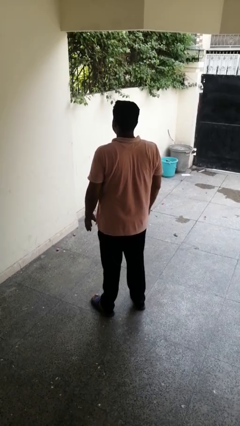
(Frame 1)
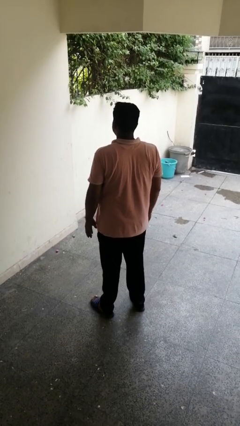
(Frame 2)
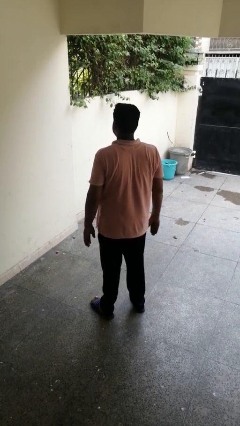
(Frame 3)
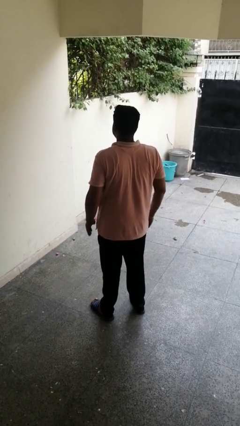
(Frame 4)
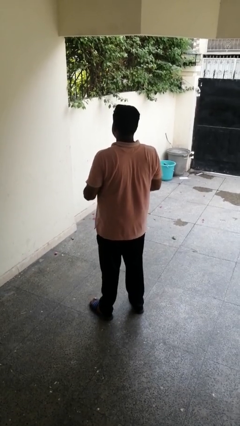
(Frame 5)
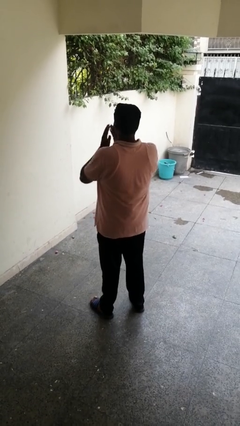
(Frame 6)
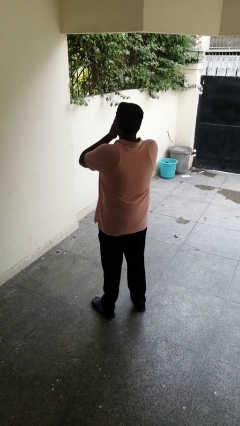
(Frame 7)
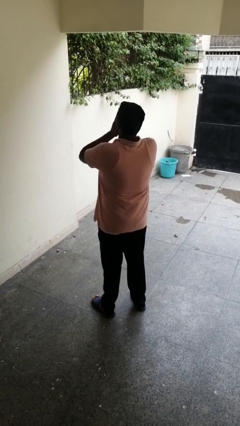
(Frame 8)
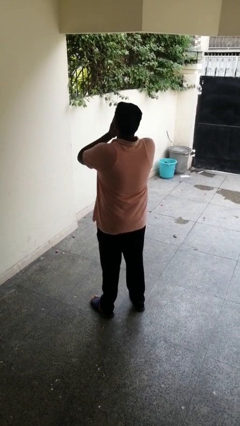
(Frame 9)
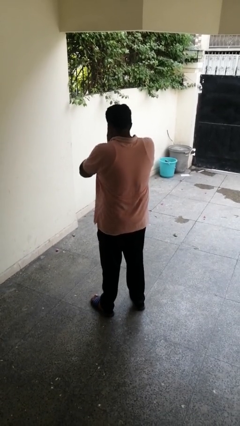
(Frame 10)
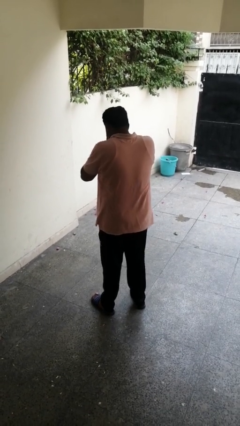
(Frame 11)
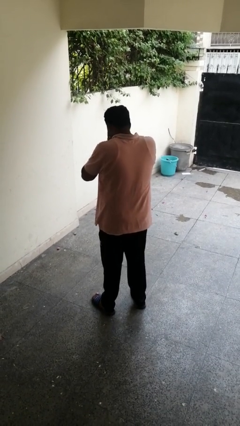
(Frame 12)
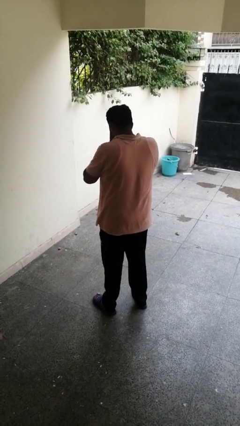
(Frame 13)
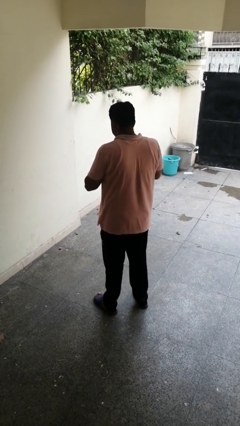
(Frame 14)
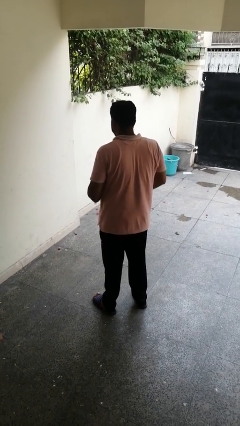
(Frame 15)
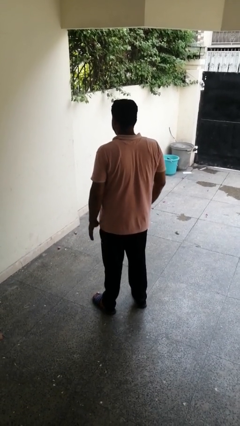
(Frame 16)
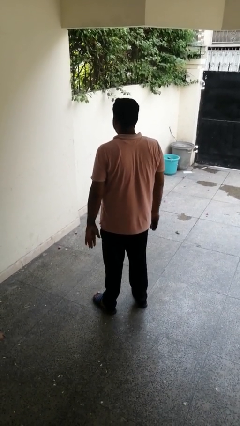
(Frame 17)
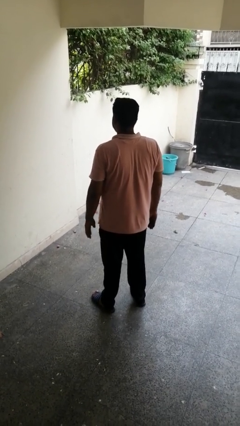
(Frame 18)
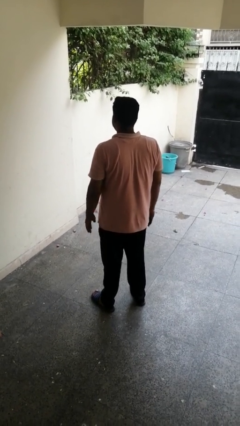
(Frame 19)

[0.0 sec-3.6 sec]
person sneezes into hand

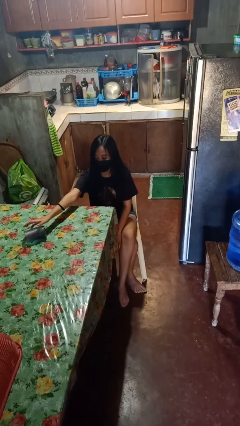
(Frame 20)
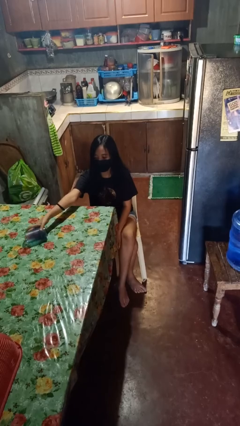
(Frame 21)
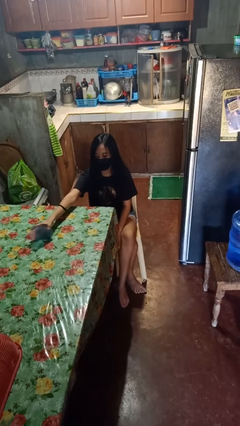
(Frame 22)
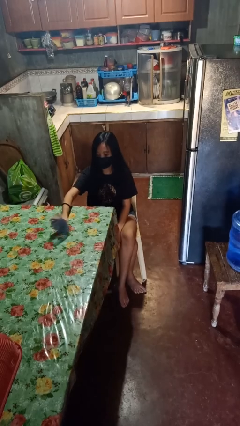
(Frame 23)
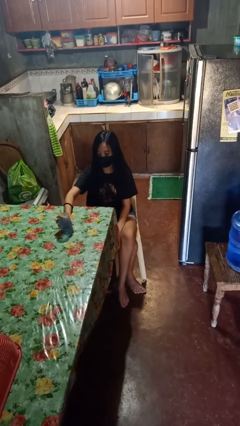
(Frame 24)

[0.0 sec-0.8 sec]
person sets upright glass

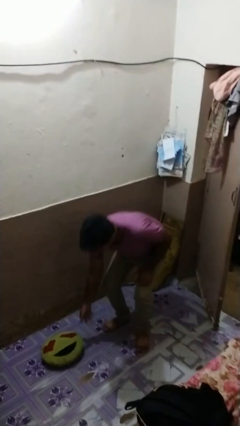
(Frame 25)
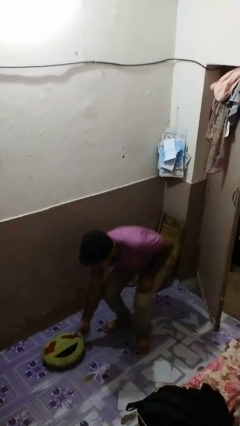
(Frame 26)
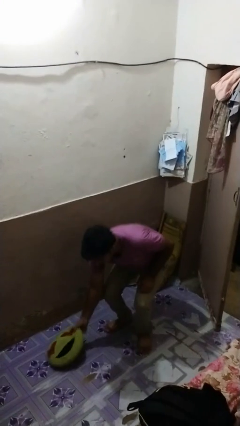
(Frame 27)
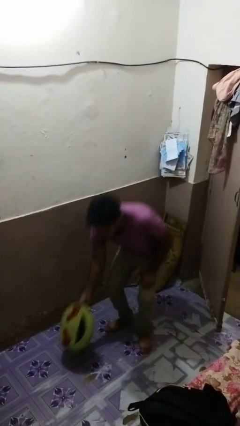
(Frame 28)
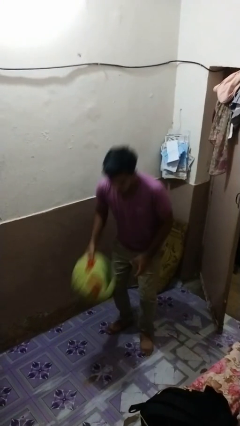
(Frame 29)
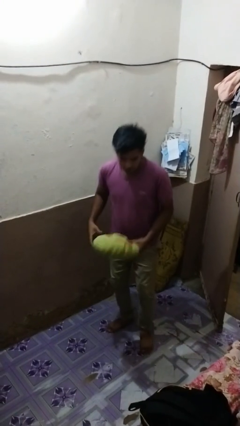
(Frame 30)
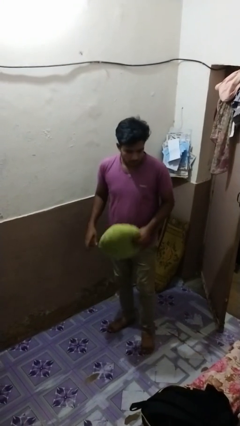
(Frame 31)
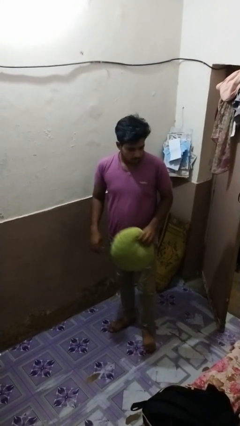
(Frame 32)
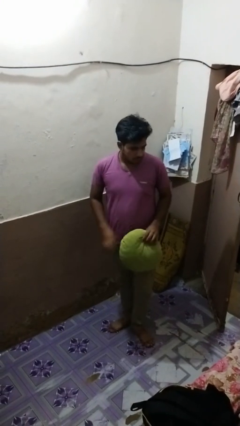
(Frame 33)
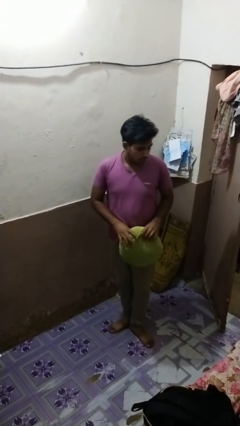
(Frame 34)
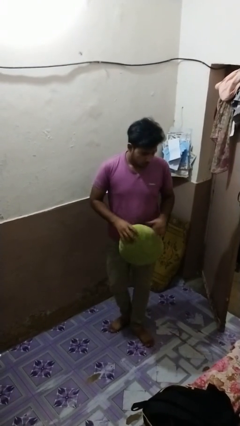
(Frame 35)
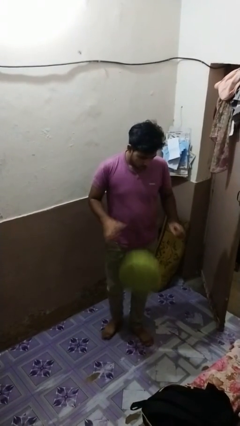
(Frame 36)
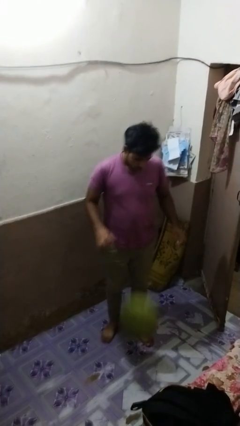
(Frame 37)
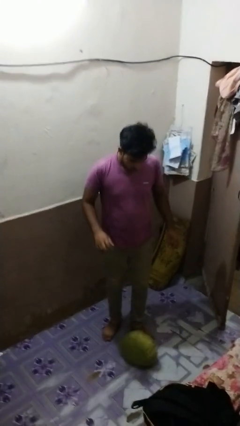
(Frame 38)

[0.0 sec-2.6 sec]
person picks up object from floor

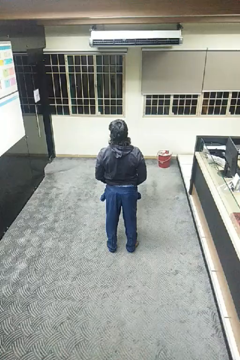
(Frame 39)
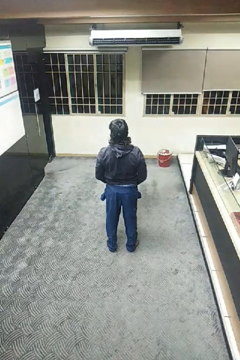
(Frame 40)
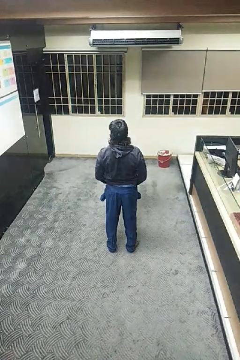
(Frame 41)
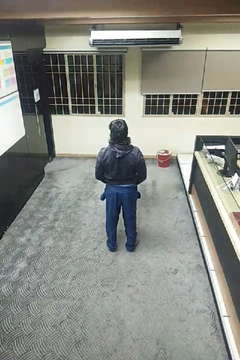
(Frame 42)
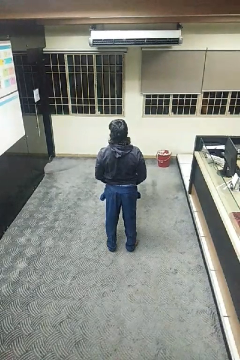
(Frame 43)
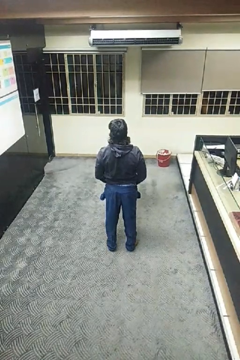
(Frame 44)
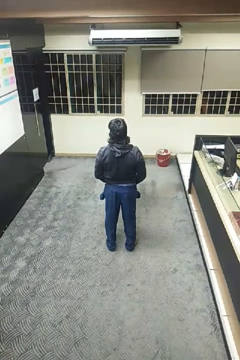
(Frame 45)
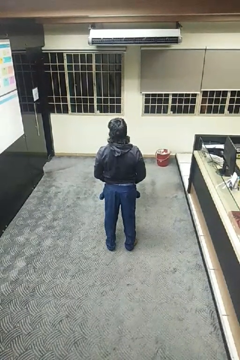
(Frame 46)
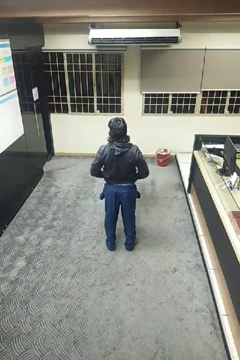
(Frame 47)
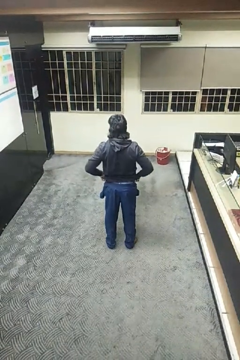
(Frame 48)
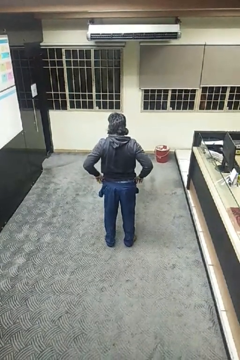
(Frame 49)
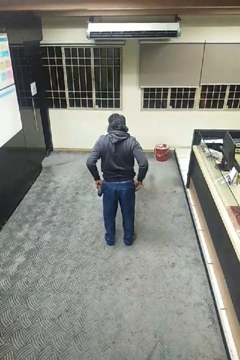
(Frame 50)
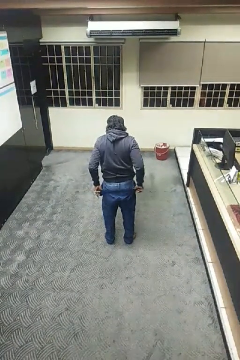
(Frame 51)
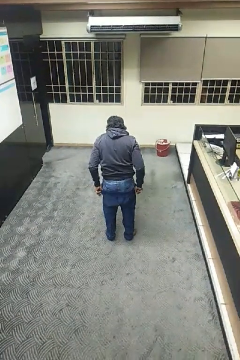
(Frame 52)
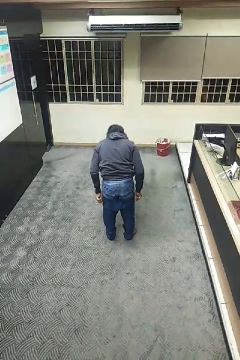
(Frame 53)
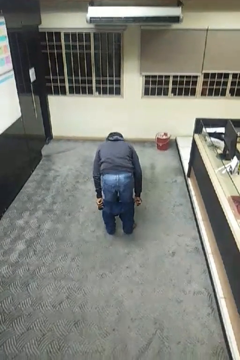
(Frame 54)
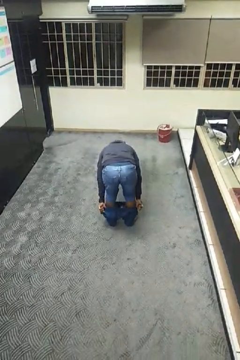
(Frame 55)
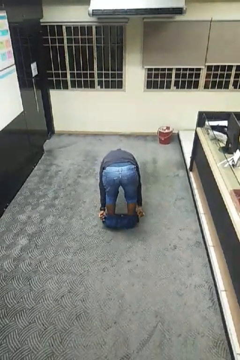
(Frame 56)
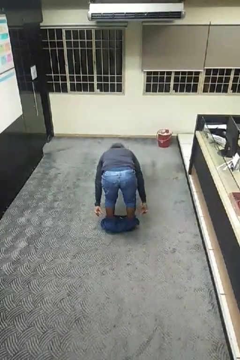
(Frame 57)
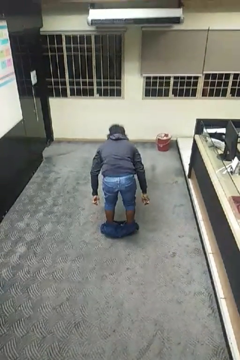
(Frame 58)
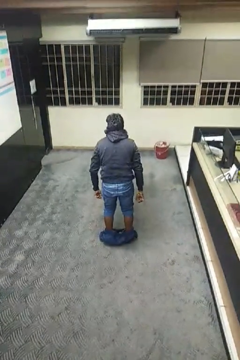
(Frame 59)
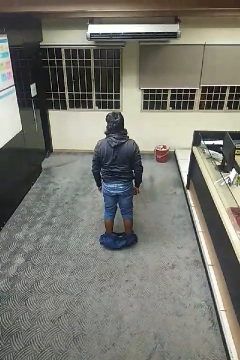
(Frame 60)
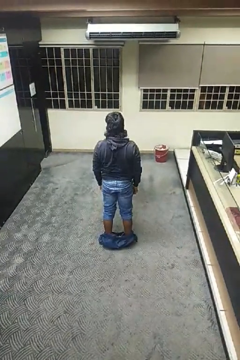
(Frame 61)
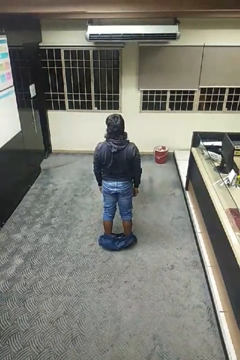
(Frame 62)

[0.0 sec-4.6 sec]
person takes off pants

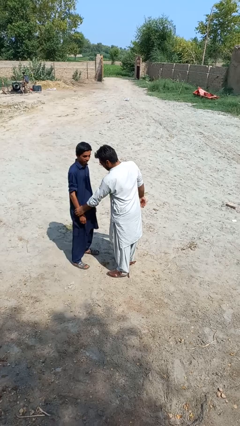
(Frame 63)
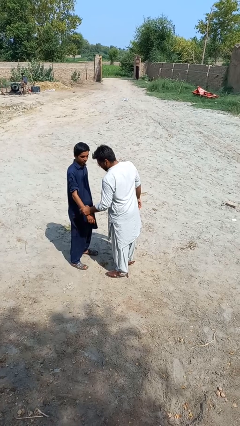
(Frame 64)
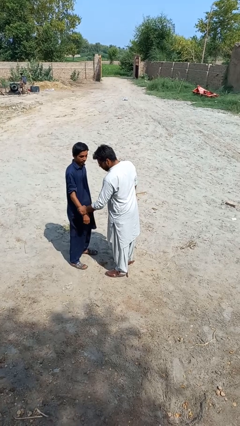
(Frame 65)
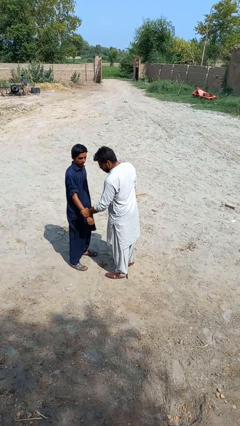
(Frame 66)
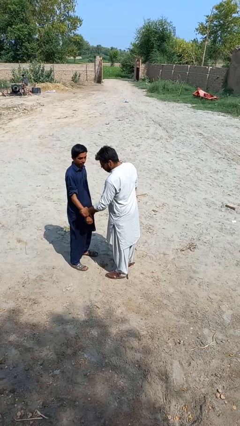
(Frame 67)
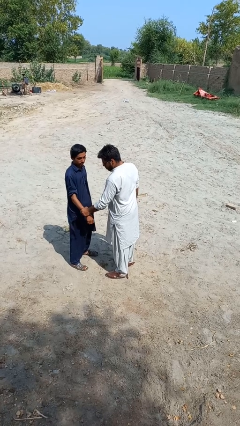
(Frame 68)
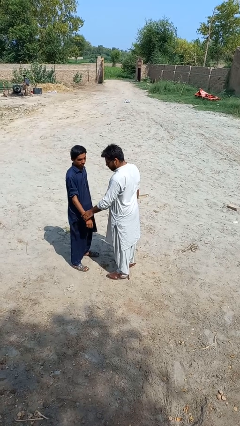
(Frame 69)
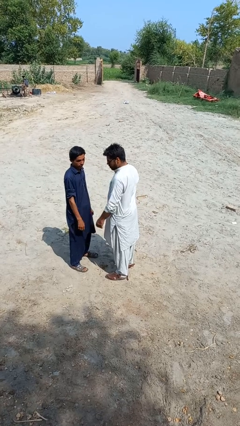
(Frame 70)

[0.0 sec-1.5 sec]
person grabs person by forearm

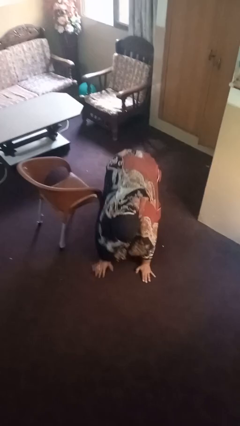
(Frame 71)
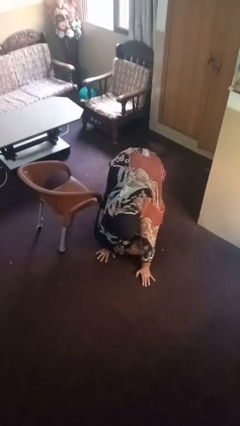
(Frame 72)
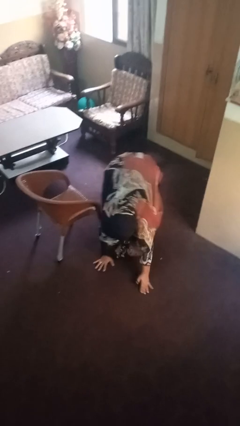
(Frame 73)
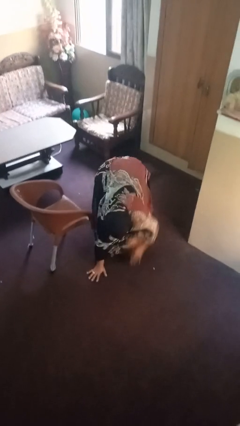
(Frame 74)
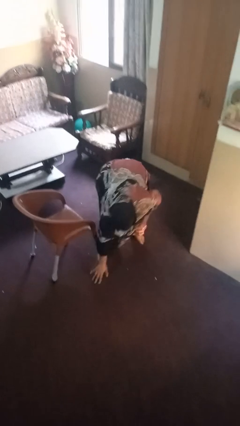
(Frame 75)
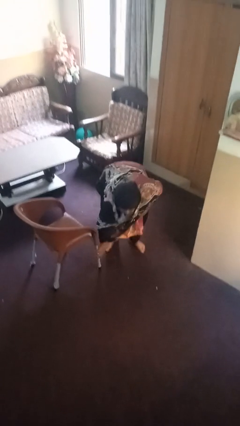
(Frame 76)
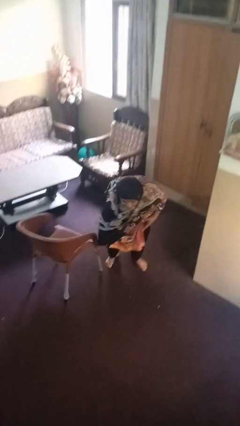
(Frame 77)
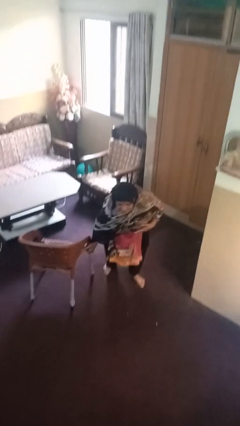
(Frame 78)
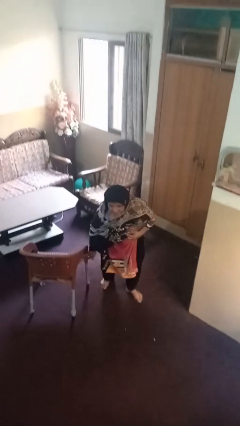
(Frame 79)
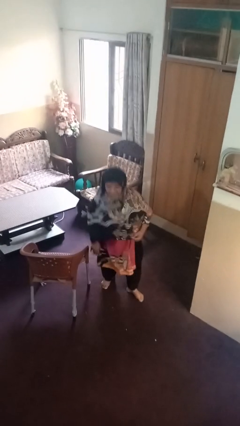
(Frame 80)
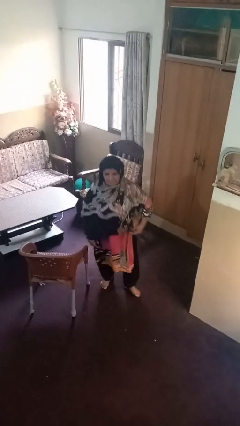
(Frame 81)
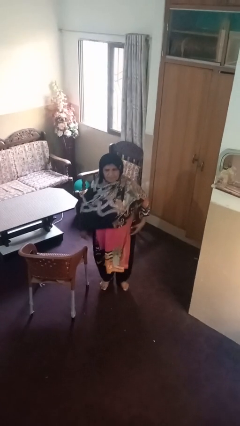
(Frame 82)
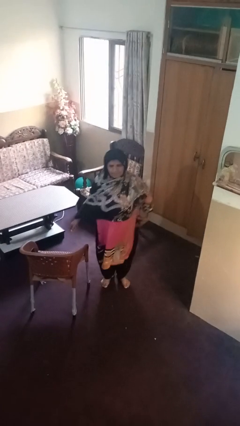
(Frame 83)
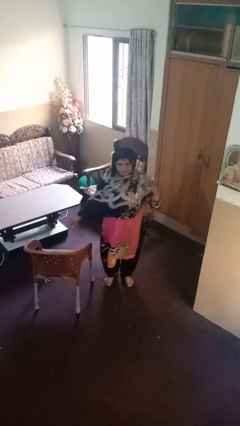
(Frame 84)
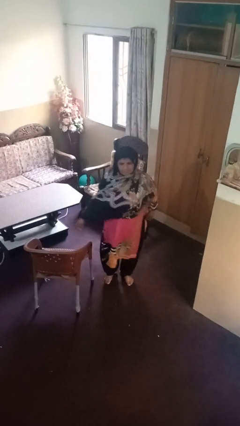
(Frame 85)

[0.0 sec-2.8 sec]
person stands up from floor

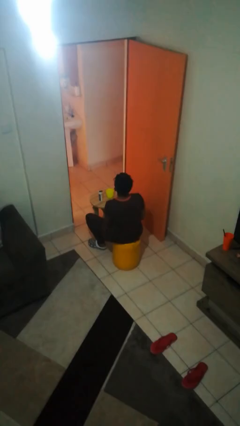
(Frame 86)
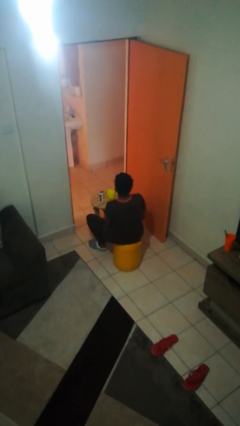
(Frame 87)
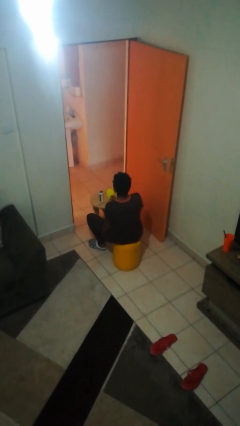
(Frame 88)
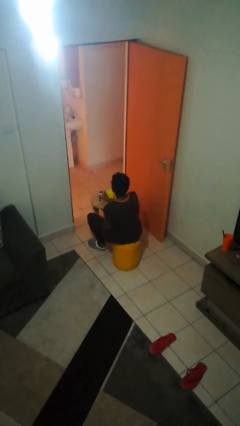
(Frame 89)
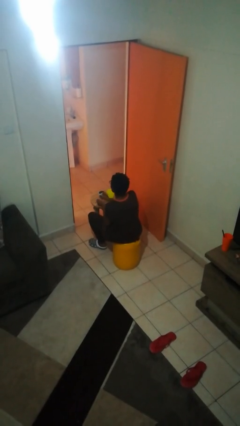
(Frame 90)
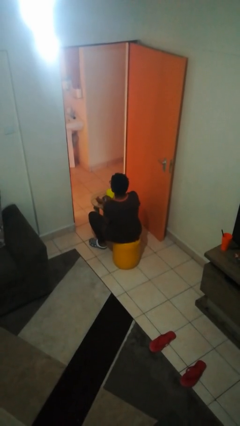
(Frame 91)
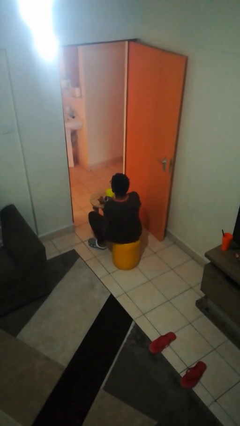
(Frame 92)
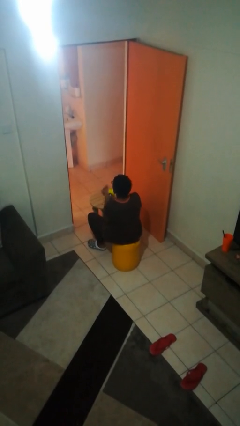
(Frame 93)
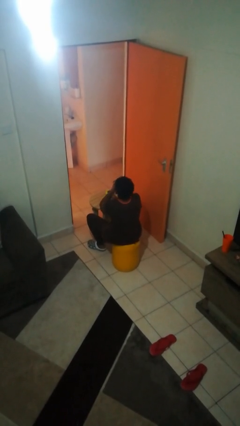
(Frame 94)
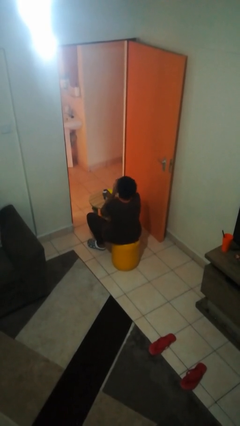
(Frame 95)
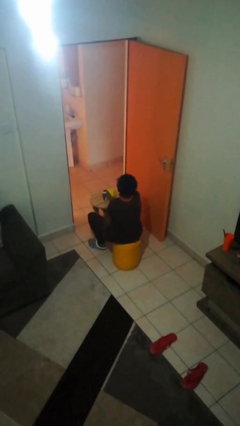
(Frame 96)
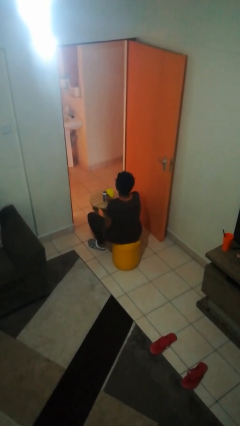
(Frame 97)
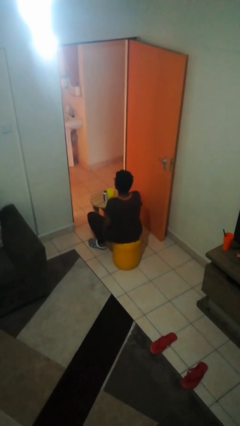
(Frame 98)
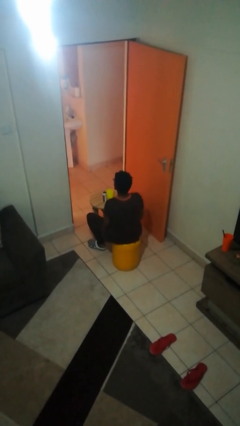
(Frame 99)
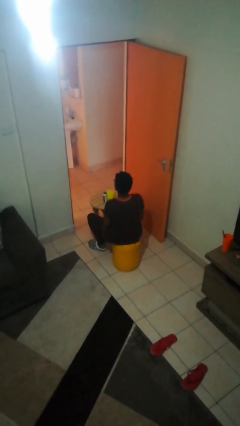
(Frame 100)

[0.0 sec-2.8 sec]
person takes medicine pills
